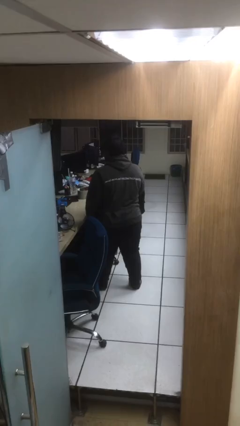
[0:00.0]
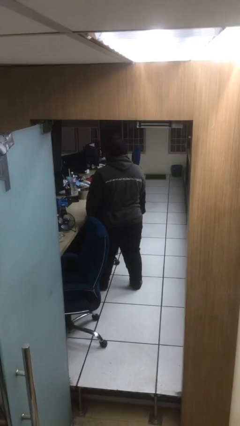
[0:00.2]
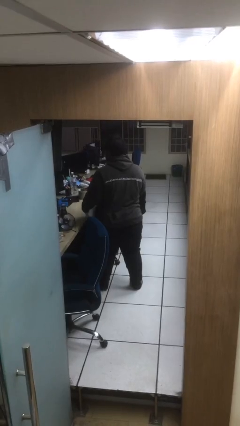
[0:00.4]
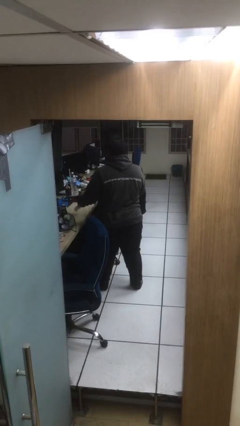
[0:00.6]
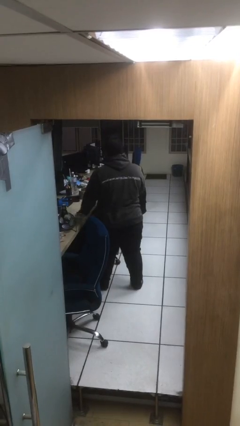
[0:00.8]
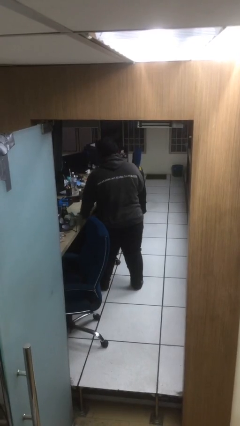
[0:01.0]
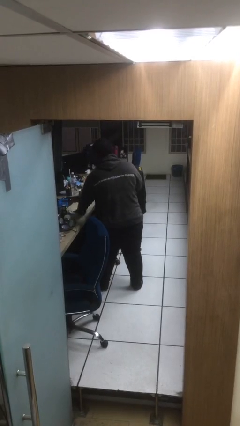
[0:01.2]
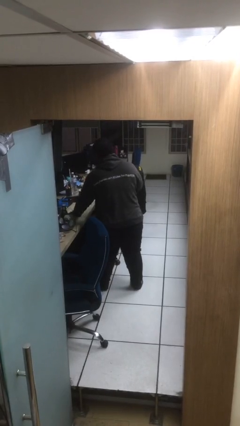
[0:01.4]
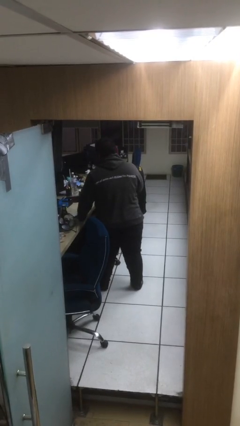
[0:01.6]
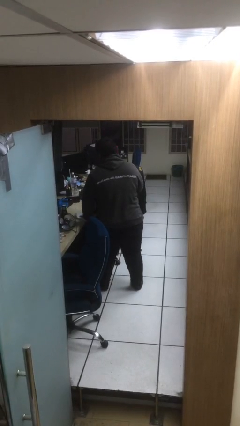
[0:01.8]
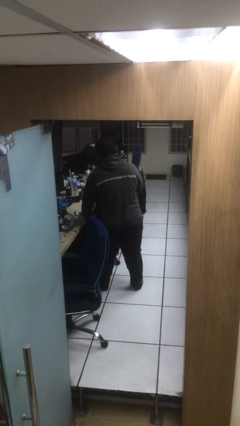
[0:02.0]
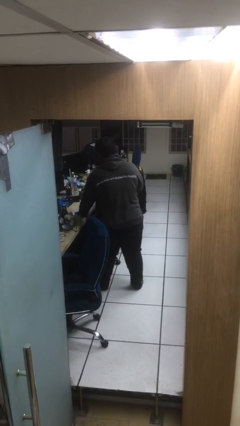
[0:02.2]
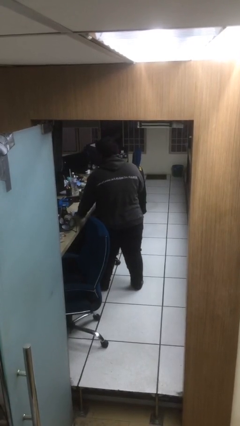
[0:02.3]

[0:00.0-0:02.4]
person cleans table with rag

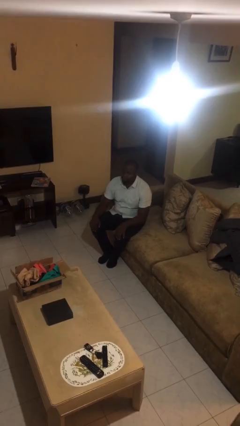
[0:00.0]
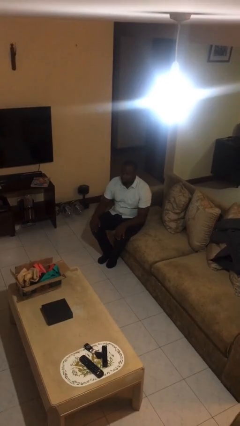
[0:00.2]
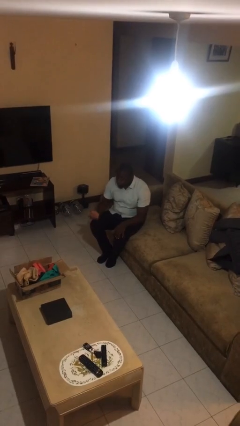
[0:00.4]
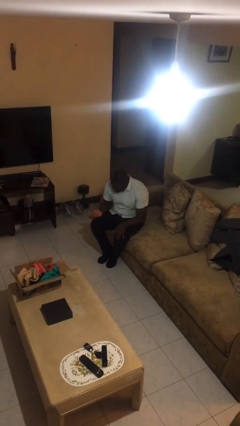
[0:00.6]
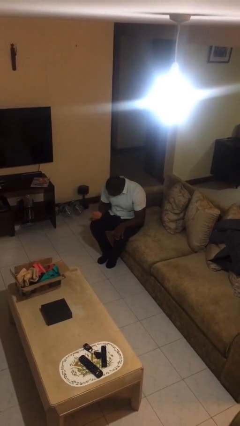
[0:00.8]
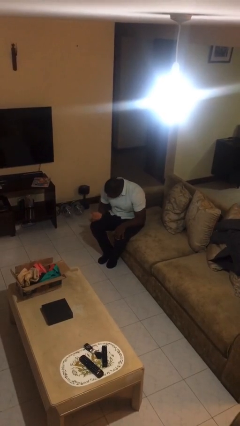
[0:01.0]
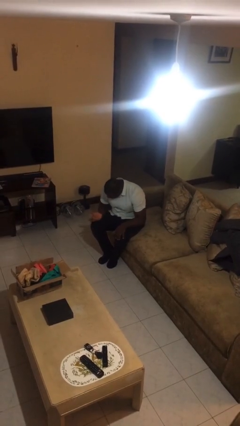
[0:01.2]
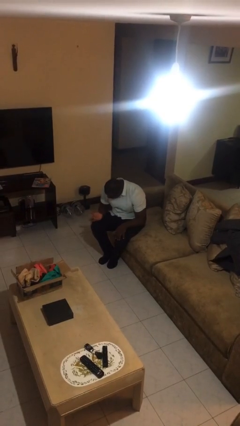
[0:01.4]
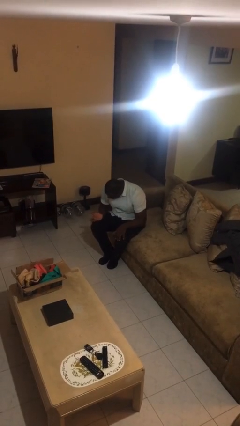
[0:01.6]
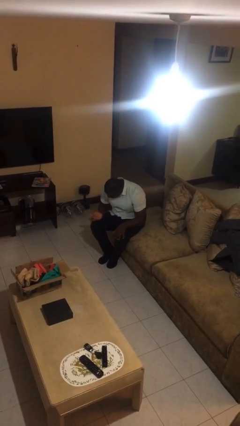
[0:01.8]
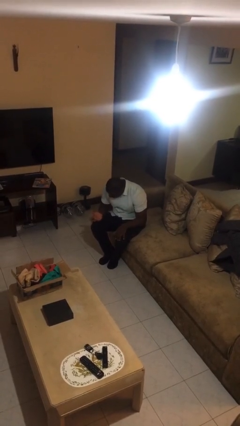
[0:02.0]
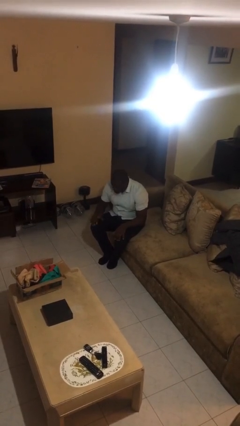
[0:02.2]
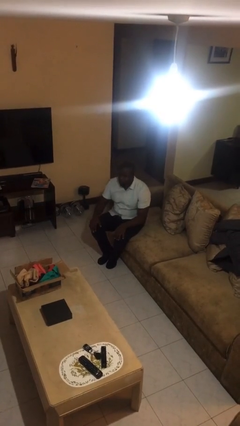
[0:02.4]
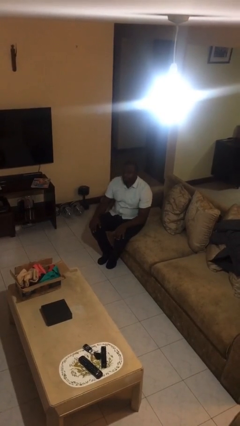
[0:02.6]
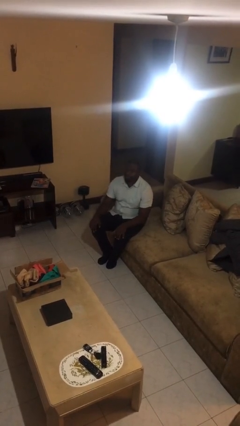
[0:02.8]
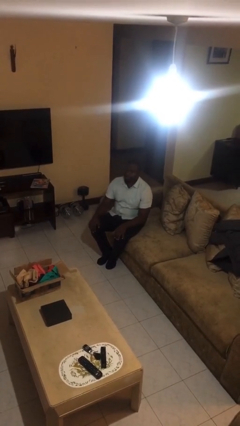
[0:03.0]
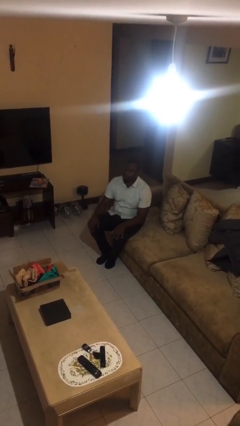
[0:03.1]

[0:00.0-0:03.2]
person looks at hands in lap

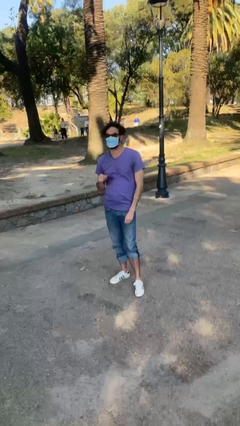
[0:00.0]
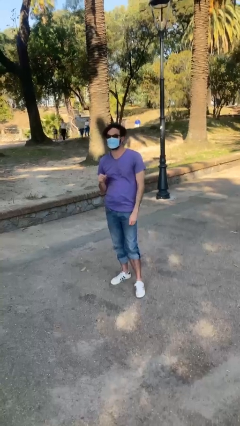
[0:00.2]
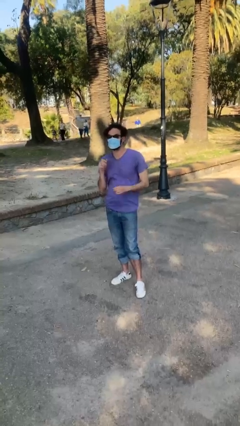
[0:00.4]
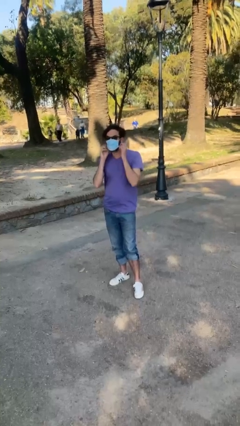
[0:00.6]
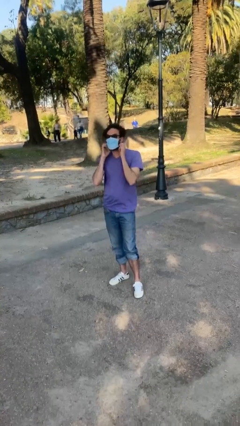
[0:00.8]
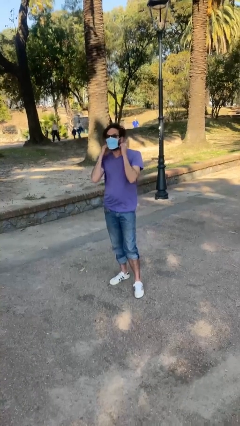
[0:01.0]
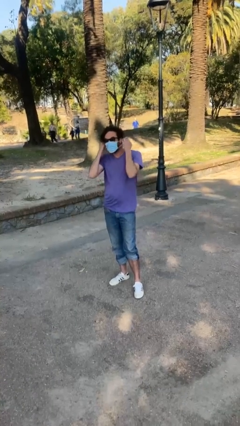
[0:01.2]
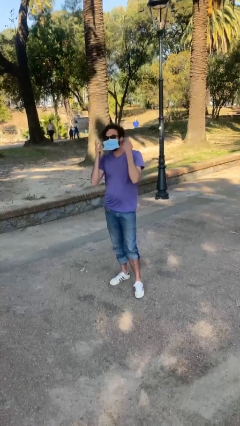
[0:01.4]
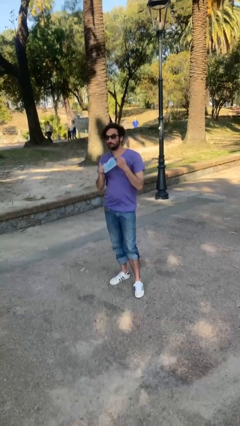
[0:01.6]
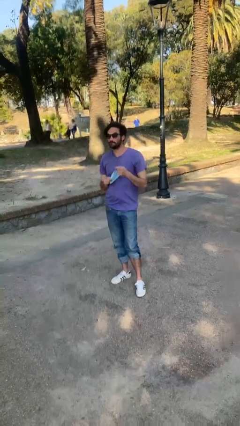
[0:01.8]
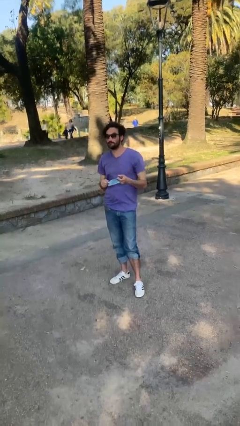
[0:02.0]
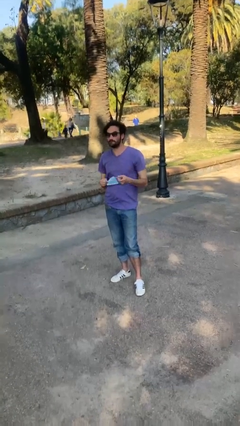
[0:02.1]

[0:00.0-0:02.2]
person takes off facemask

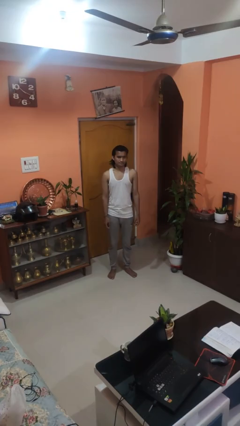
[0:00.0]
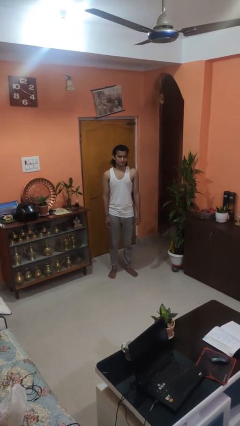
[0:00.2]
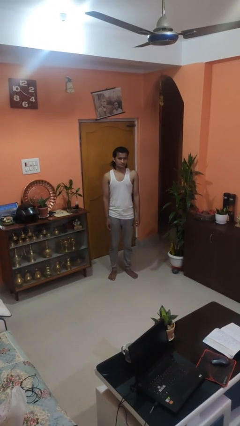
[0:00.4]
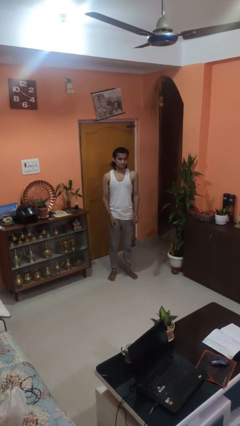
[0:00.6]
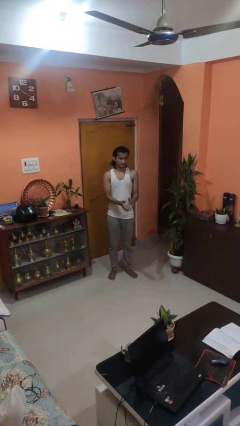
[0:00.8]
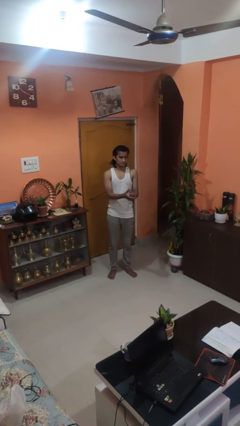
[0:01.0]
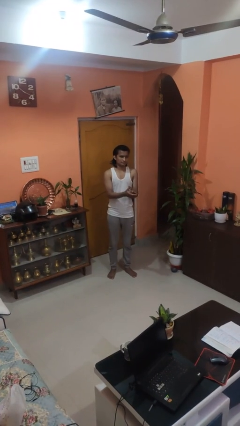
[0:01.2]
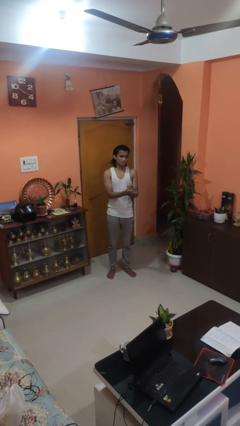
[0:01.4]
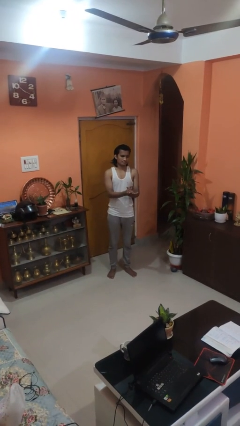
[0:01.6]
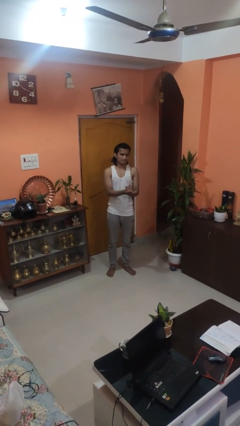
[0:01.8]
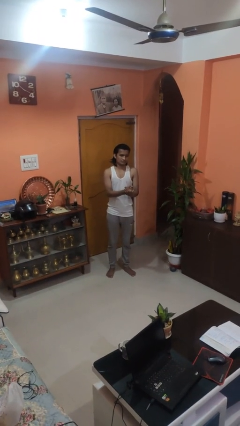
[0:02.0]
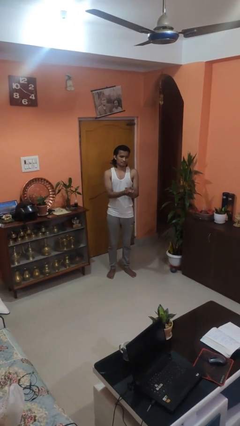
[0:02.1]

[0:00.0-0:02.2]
person claps hands

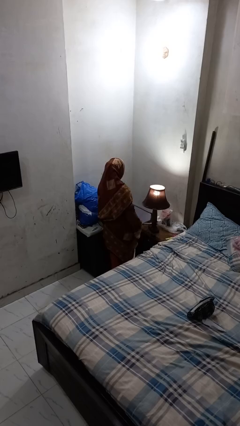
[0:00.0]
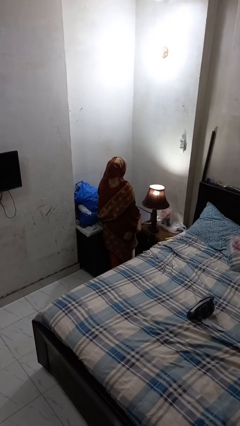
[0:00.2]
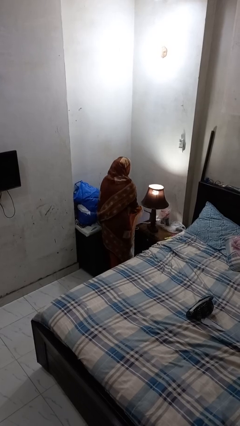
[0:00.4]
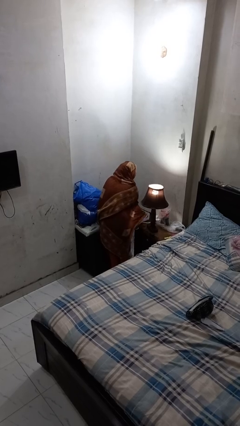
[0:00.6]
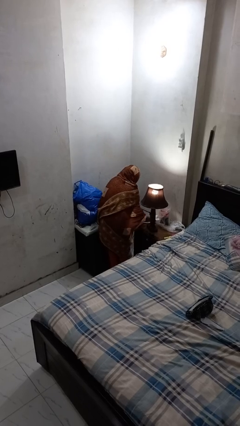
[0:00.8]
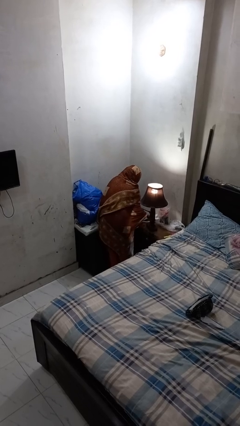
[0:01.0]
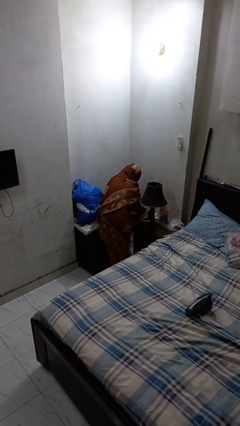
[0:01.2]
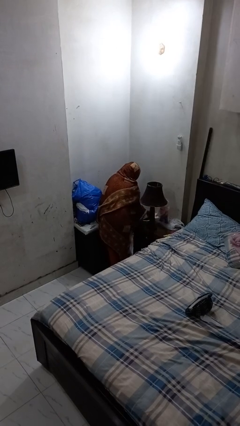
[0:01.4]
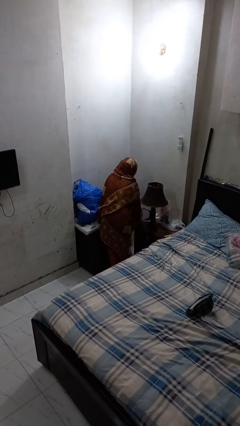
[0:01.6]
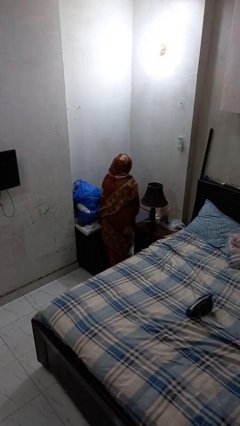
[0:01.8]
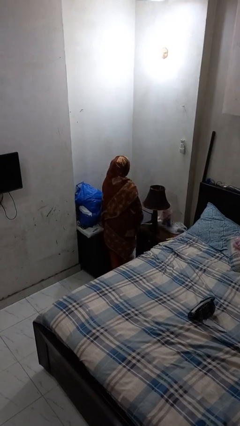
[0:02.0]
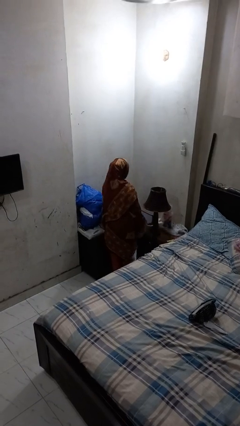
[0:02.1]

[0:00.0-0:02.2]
person turns off lamp

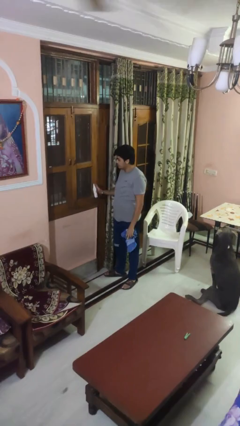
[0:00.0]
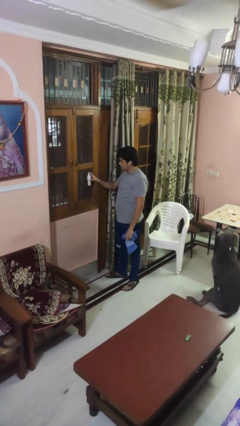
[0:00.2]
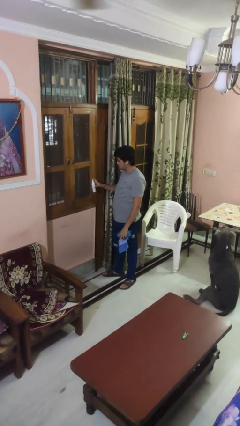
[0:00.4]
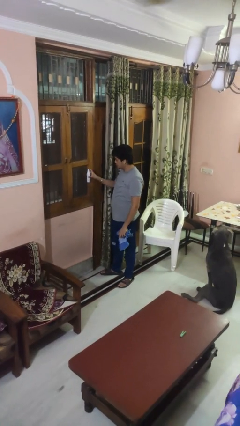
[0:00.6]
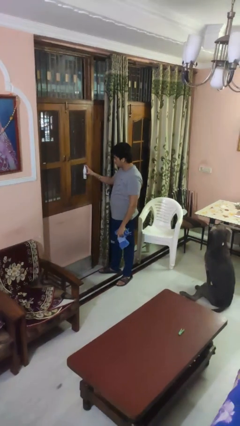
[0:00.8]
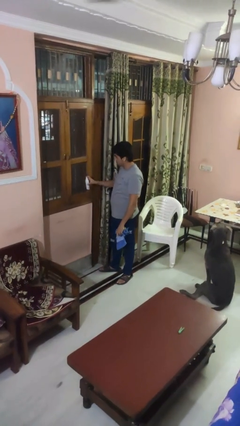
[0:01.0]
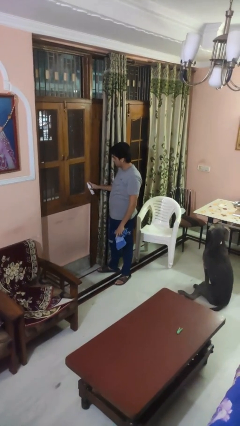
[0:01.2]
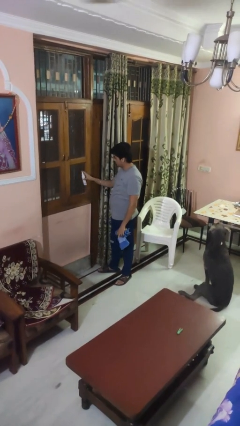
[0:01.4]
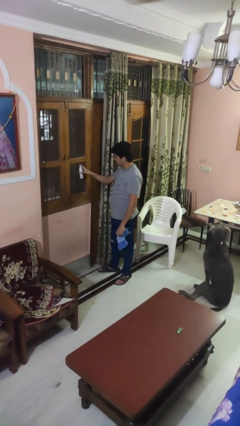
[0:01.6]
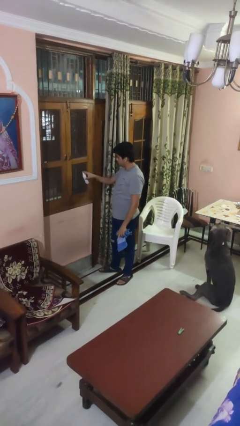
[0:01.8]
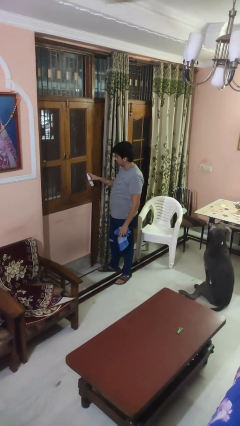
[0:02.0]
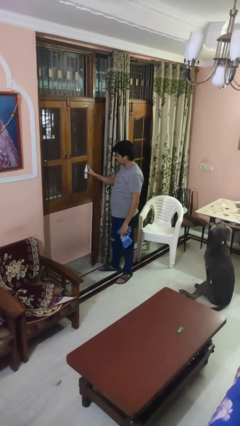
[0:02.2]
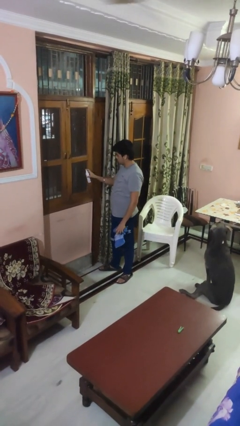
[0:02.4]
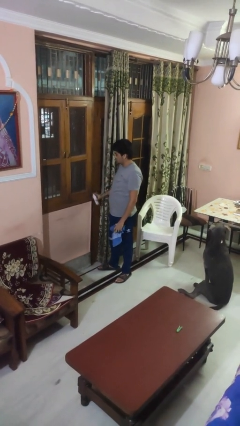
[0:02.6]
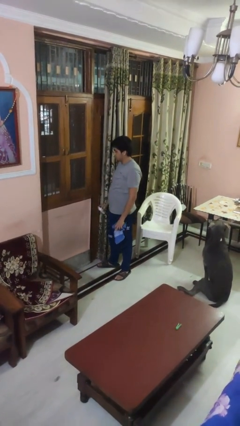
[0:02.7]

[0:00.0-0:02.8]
person sprays from bottle

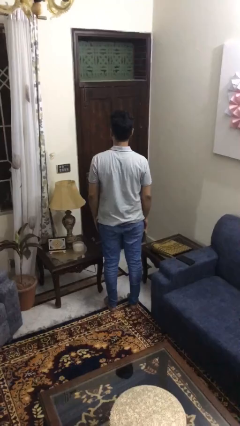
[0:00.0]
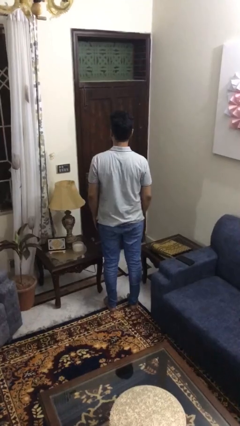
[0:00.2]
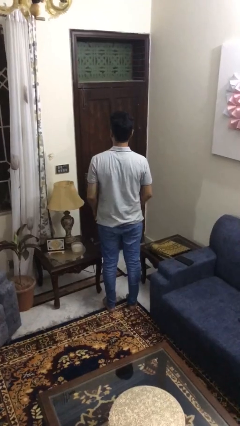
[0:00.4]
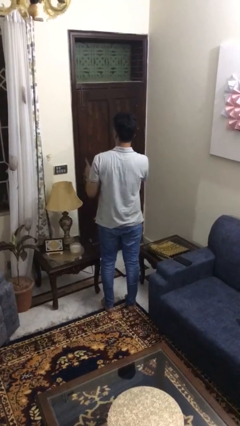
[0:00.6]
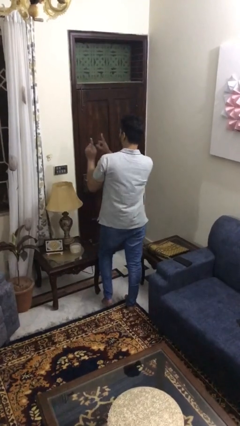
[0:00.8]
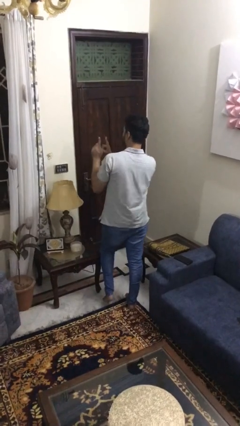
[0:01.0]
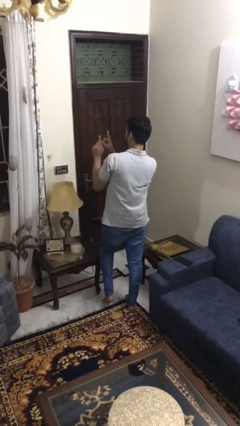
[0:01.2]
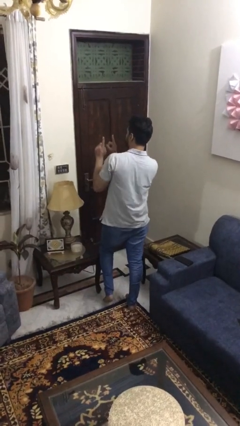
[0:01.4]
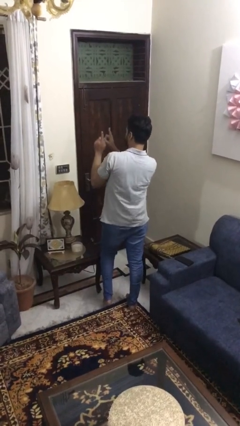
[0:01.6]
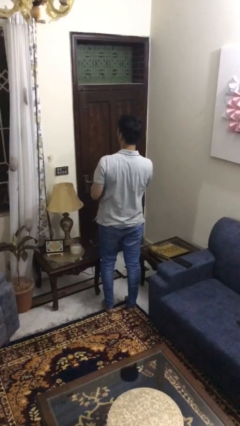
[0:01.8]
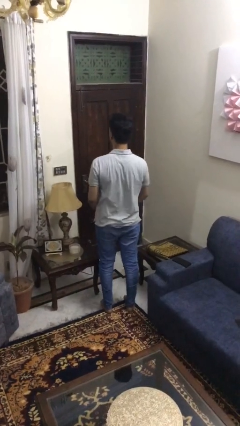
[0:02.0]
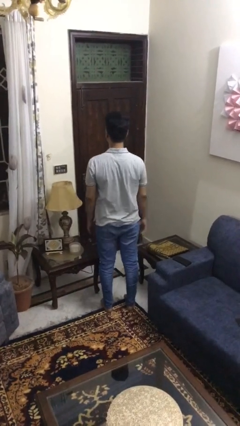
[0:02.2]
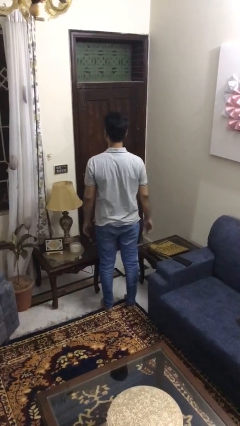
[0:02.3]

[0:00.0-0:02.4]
person dances in place
